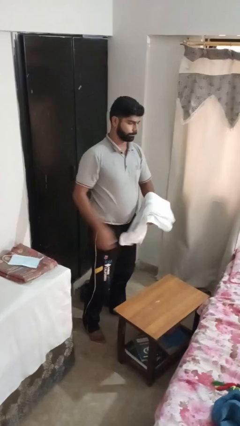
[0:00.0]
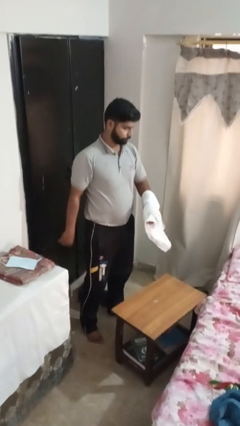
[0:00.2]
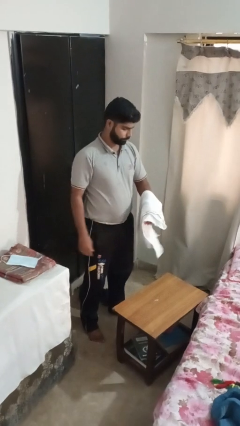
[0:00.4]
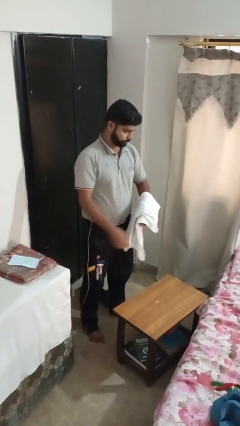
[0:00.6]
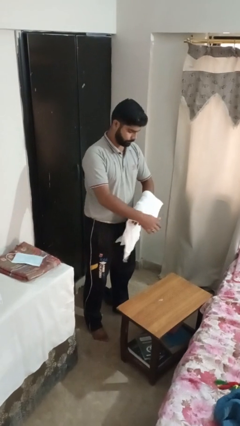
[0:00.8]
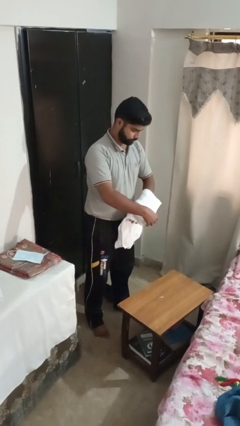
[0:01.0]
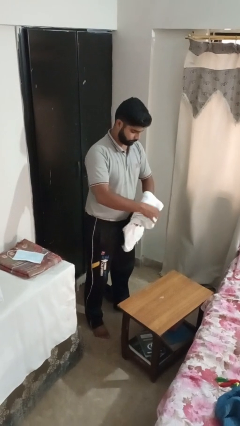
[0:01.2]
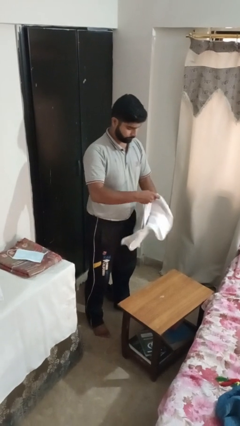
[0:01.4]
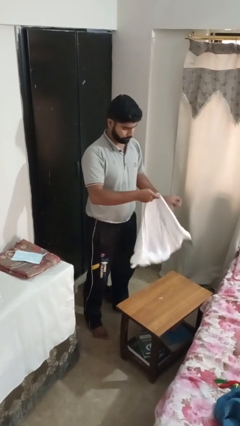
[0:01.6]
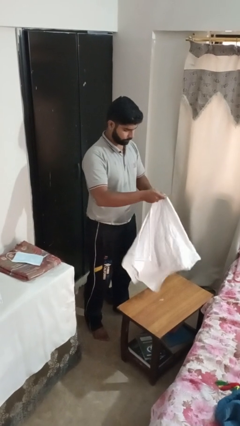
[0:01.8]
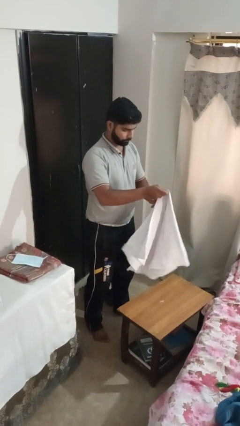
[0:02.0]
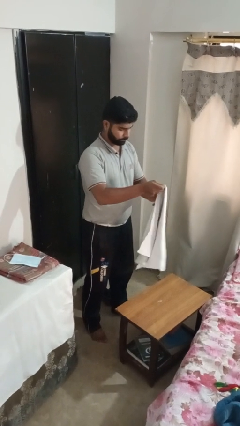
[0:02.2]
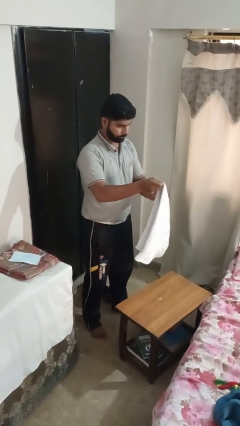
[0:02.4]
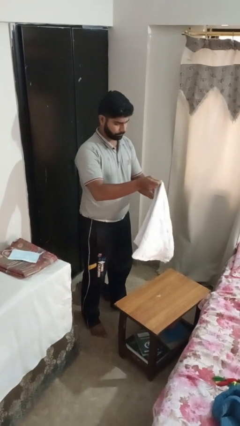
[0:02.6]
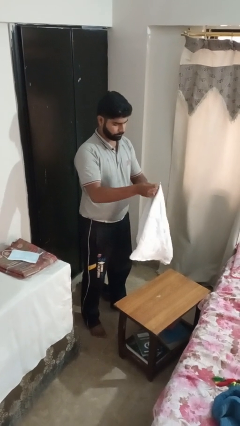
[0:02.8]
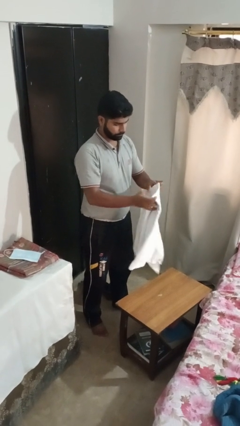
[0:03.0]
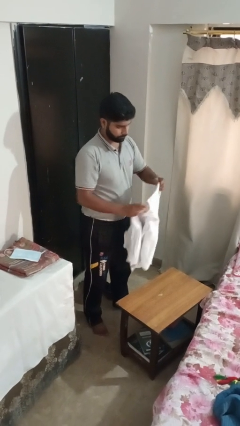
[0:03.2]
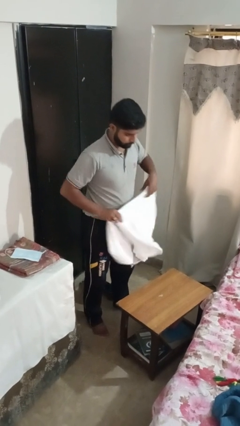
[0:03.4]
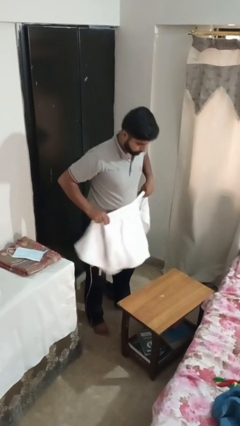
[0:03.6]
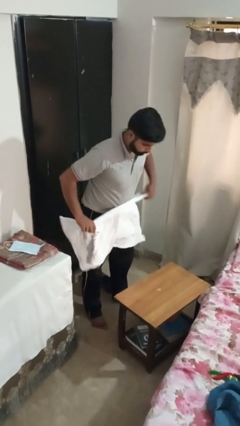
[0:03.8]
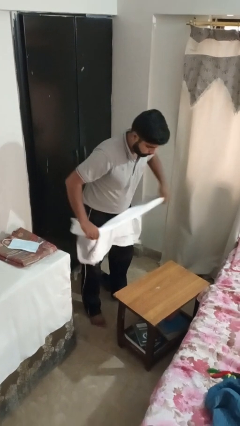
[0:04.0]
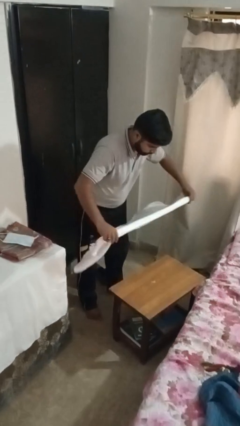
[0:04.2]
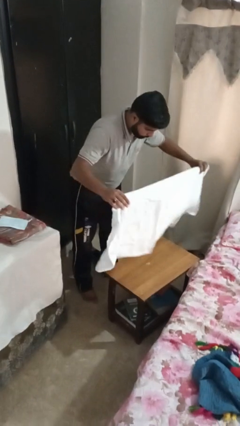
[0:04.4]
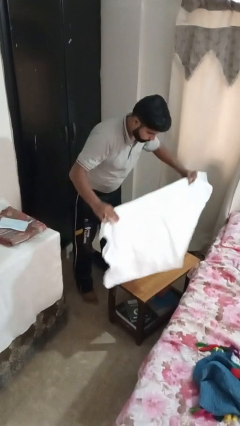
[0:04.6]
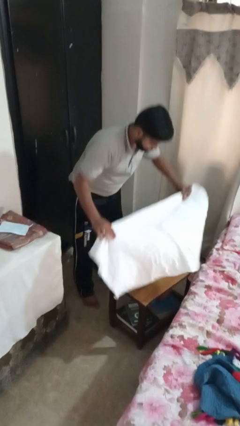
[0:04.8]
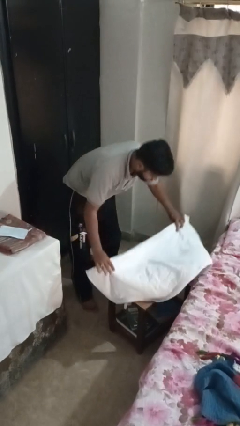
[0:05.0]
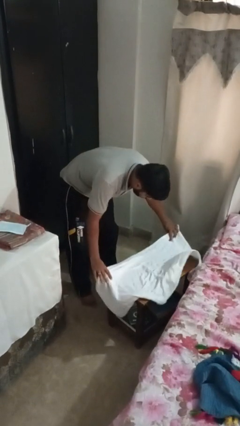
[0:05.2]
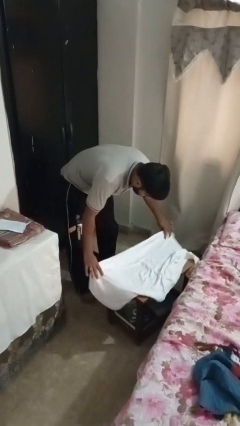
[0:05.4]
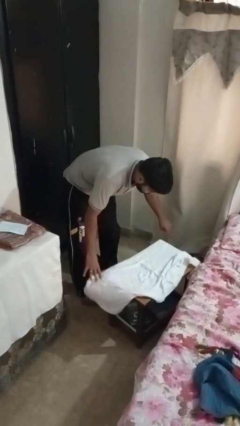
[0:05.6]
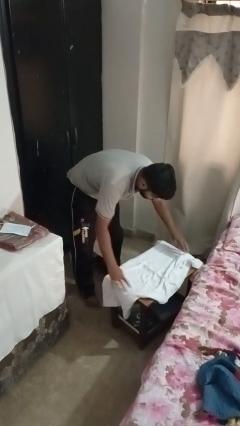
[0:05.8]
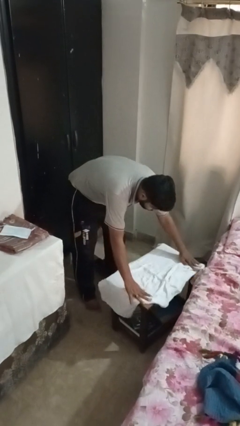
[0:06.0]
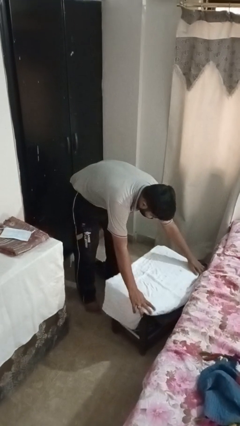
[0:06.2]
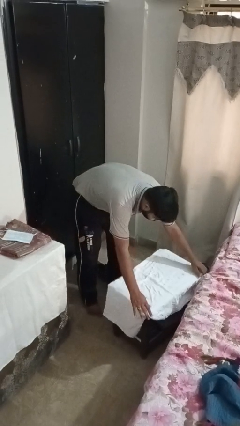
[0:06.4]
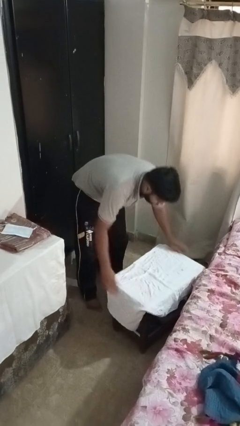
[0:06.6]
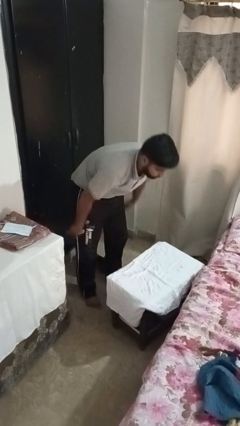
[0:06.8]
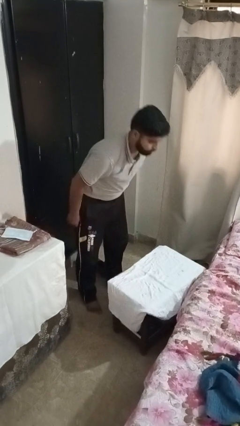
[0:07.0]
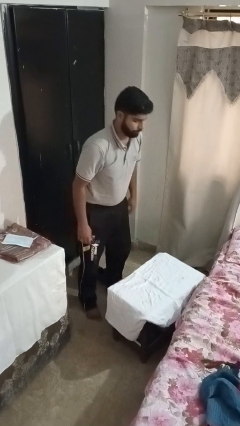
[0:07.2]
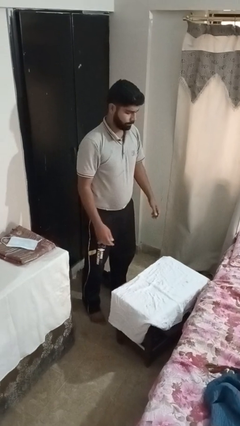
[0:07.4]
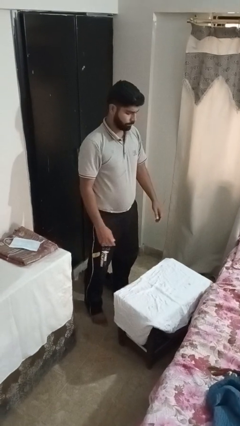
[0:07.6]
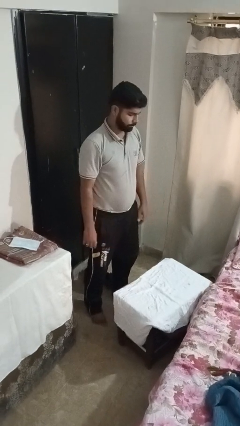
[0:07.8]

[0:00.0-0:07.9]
person spreads tablecloth

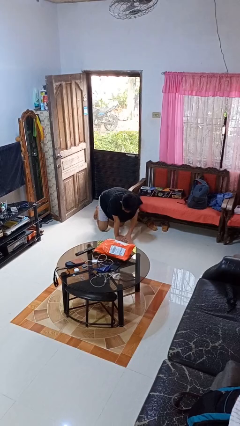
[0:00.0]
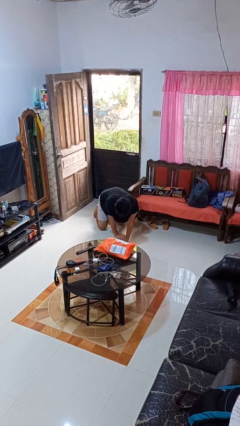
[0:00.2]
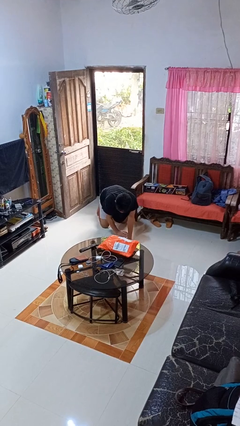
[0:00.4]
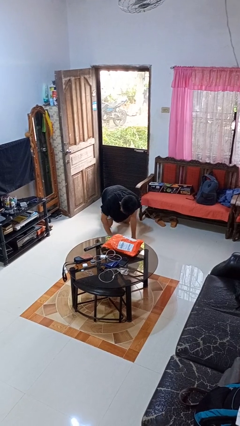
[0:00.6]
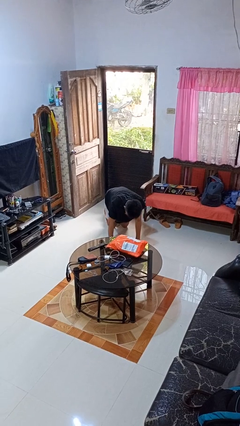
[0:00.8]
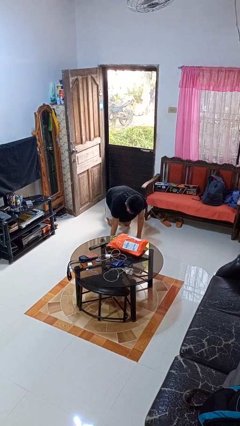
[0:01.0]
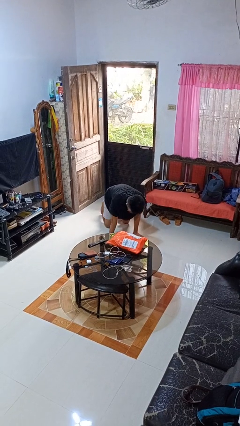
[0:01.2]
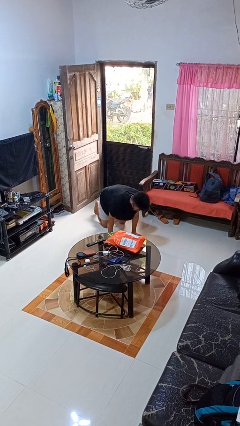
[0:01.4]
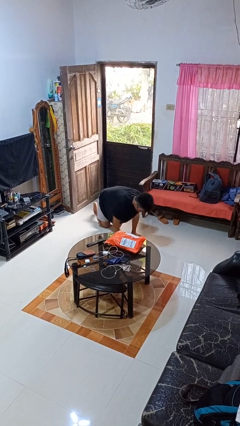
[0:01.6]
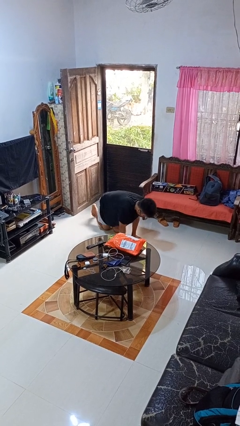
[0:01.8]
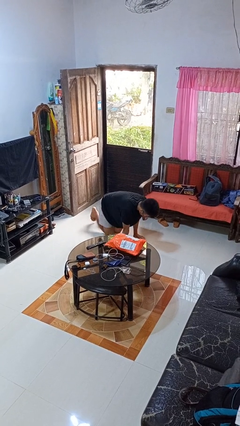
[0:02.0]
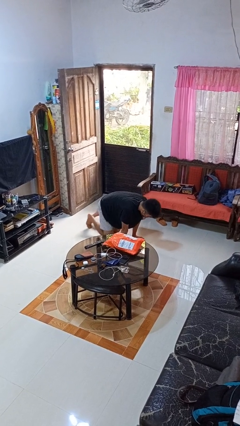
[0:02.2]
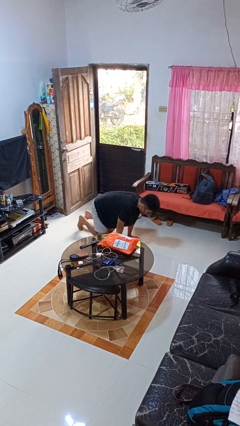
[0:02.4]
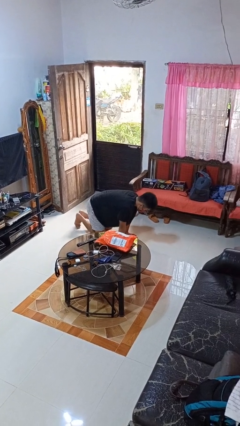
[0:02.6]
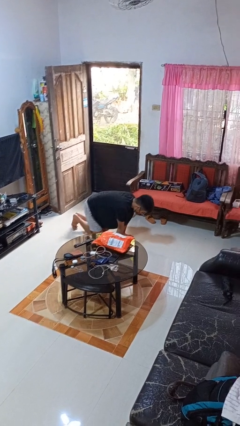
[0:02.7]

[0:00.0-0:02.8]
person crawls

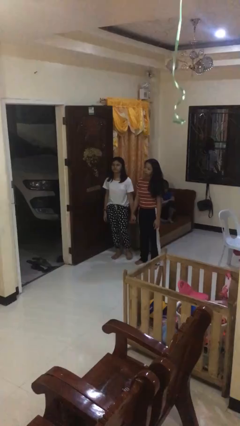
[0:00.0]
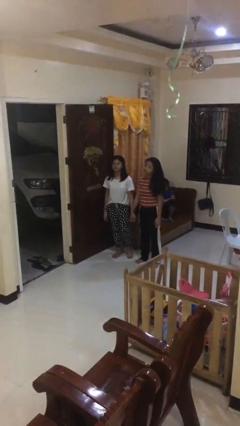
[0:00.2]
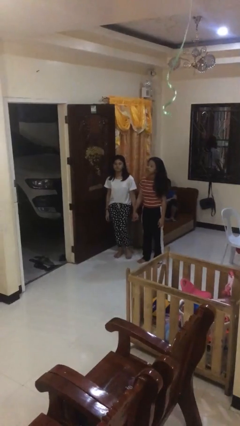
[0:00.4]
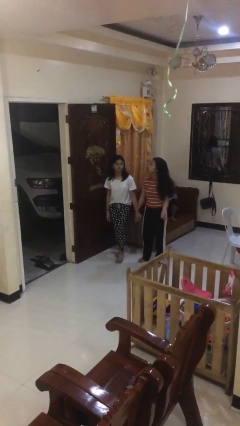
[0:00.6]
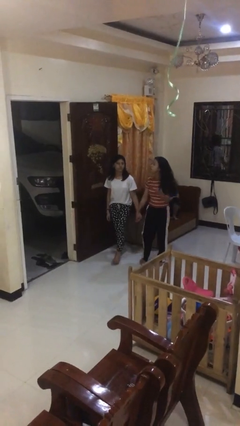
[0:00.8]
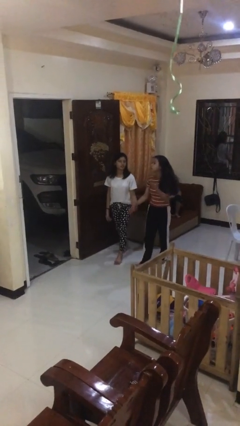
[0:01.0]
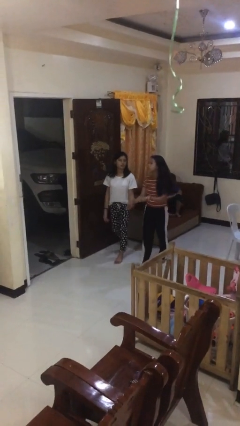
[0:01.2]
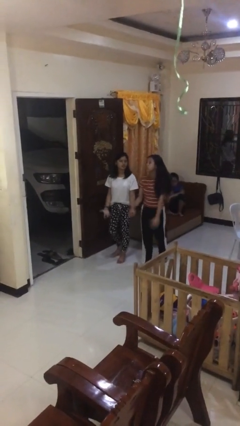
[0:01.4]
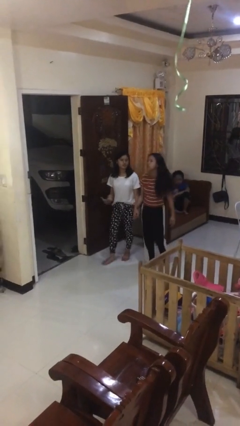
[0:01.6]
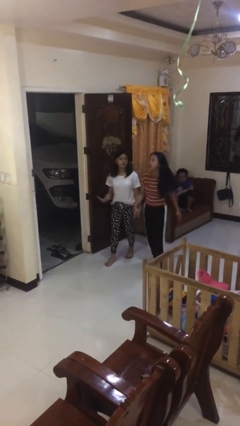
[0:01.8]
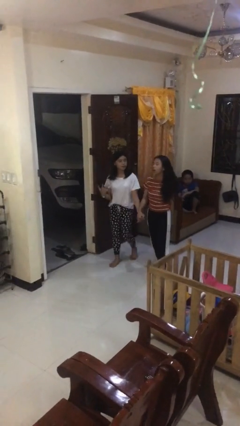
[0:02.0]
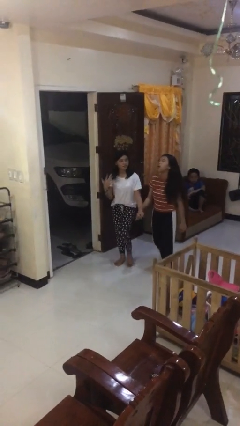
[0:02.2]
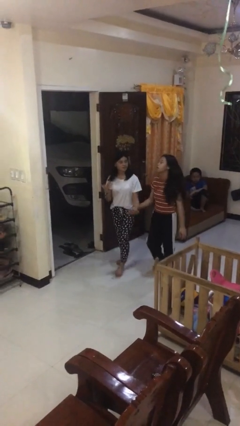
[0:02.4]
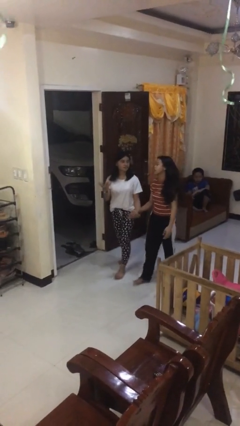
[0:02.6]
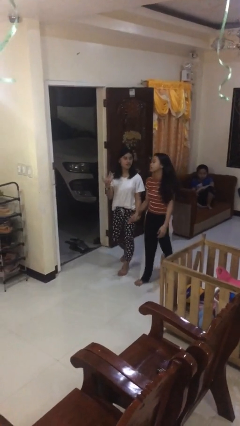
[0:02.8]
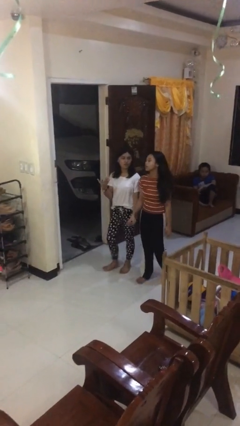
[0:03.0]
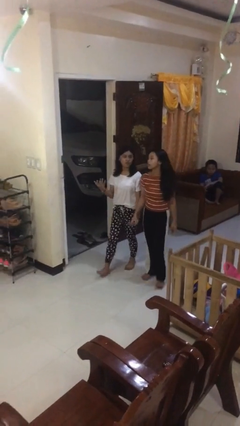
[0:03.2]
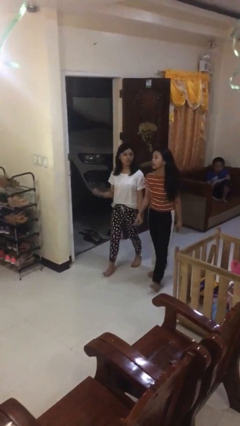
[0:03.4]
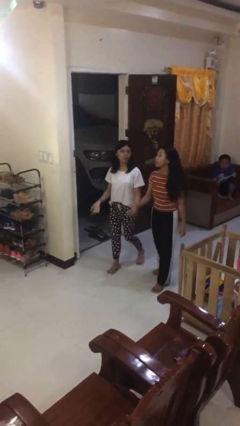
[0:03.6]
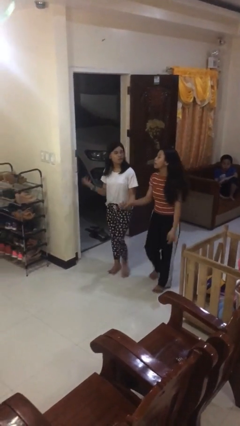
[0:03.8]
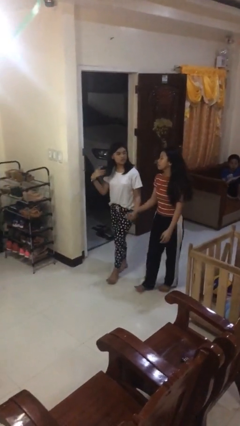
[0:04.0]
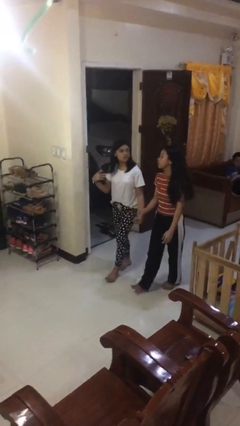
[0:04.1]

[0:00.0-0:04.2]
person holds hand

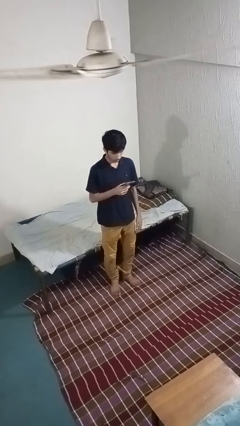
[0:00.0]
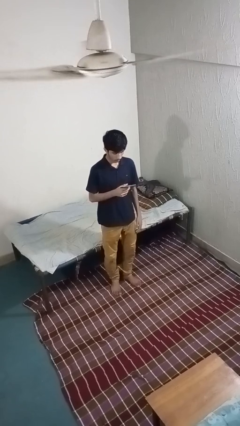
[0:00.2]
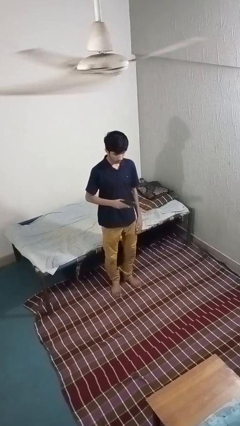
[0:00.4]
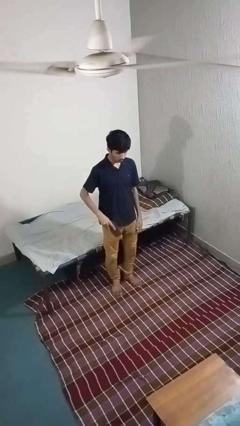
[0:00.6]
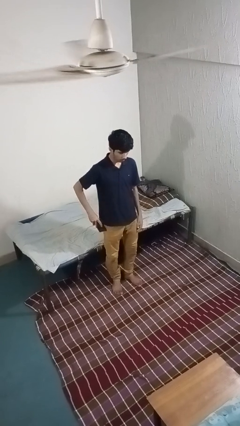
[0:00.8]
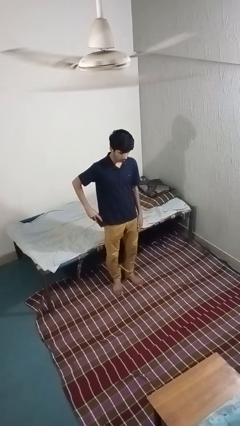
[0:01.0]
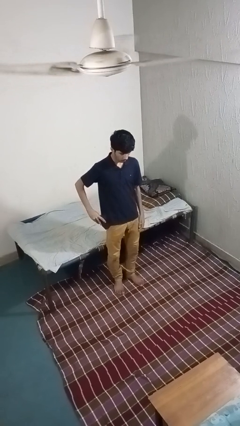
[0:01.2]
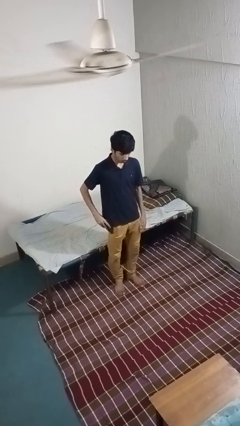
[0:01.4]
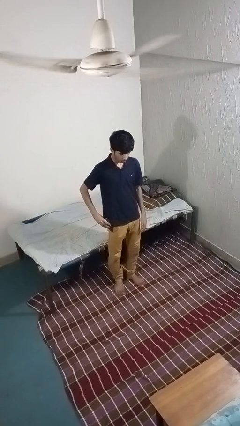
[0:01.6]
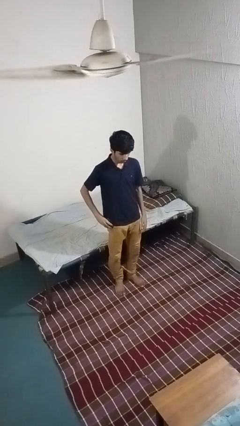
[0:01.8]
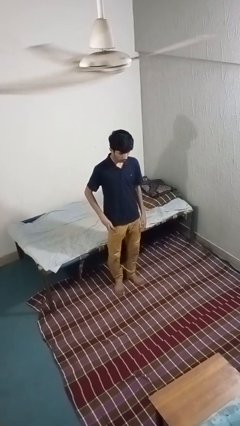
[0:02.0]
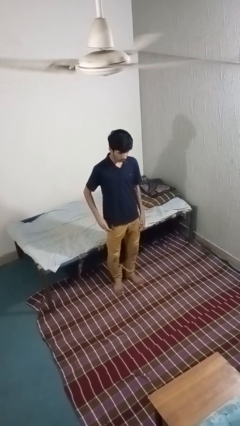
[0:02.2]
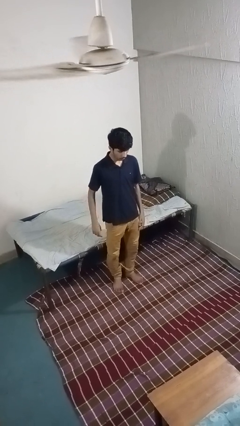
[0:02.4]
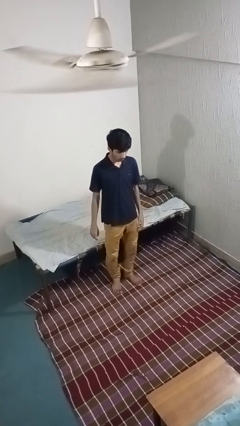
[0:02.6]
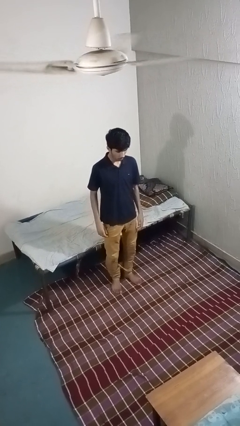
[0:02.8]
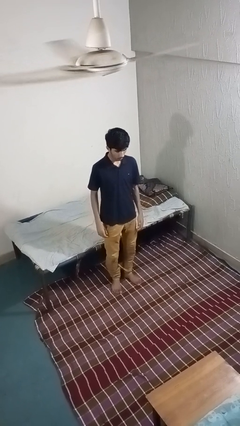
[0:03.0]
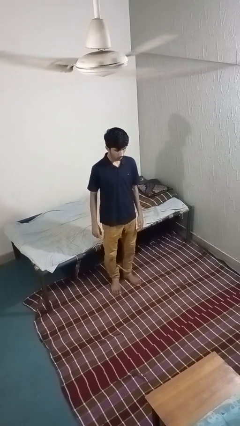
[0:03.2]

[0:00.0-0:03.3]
person puts phone into pocket
